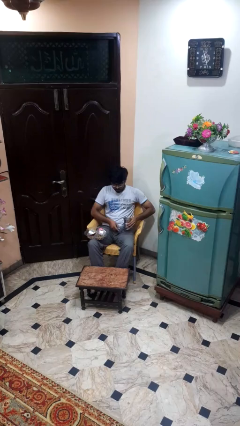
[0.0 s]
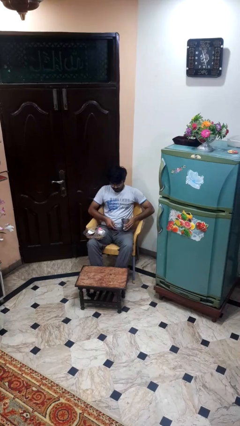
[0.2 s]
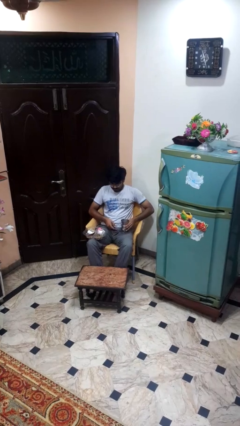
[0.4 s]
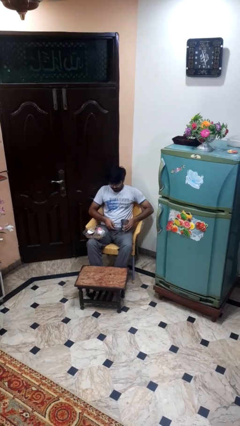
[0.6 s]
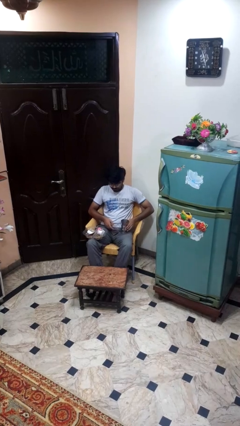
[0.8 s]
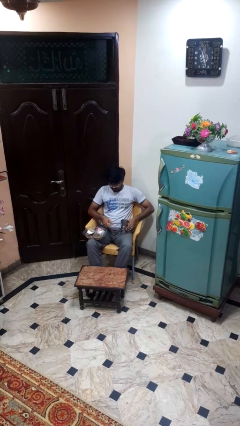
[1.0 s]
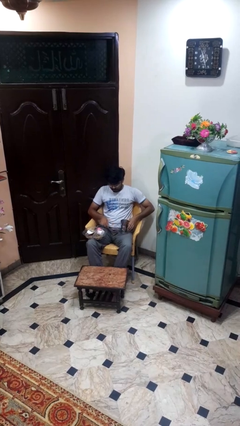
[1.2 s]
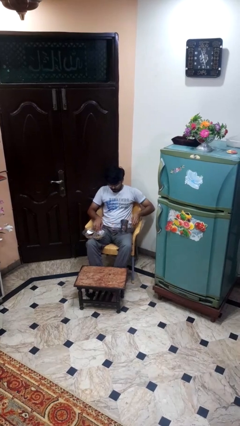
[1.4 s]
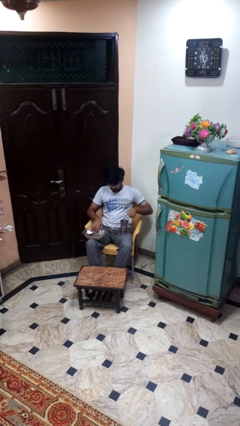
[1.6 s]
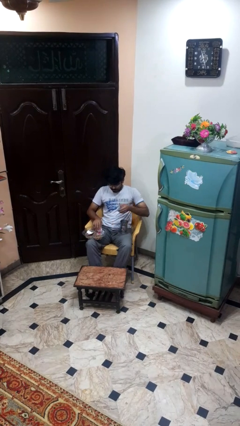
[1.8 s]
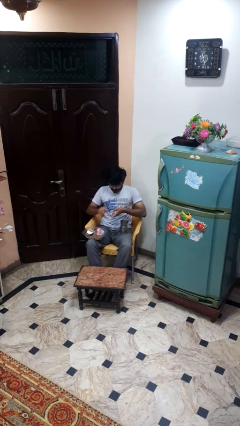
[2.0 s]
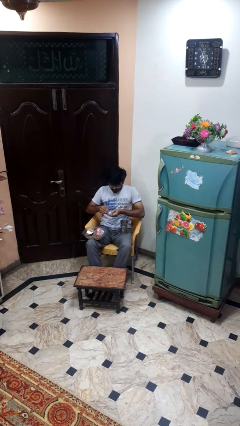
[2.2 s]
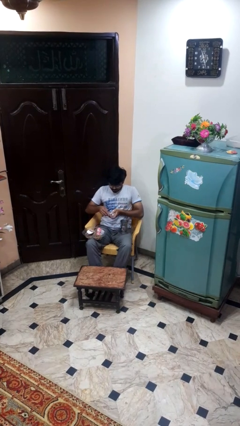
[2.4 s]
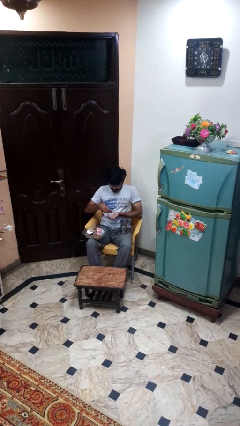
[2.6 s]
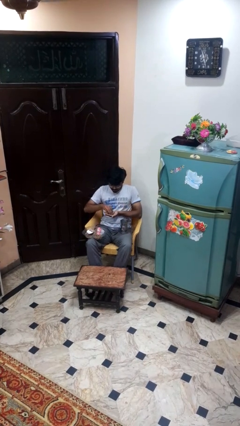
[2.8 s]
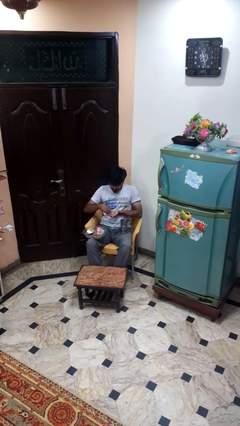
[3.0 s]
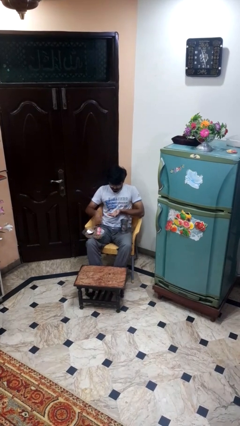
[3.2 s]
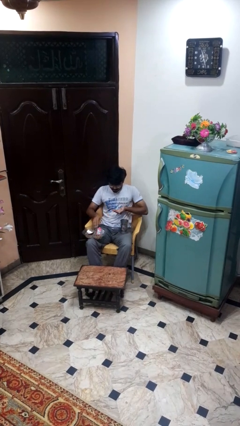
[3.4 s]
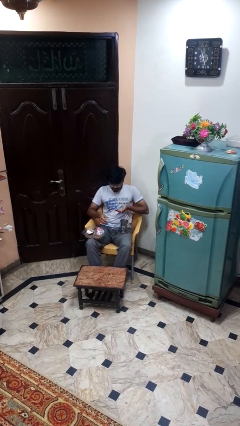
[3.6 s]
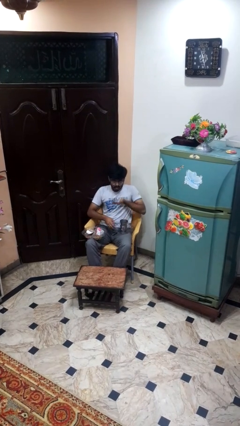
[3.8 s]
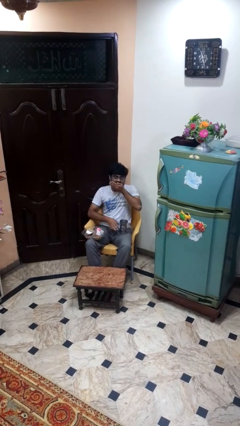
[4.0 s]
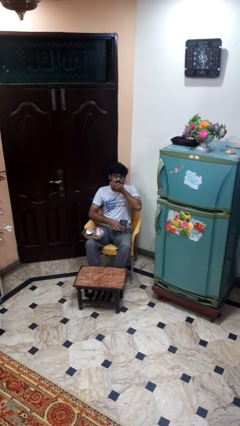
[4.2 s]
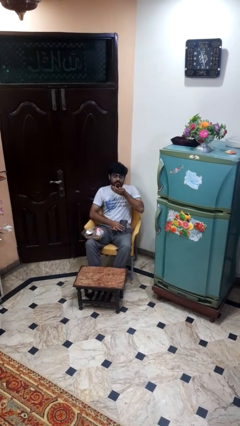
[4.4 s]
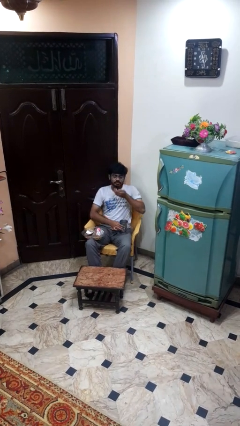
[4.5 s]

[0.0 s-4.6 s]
person takes medicine pills

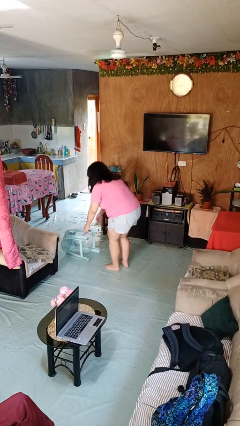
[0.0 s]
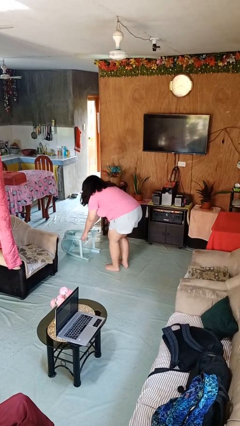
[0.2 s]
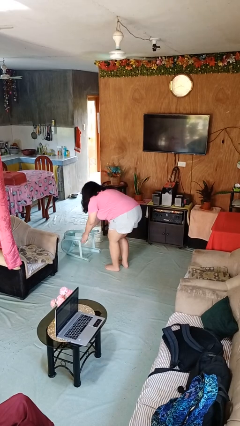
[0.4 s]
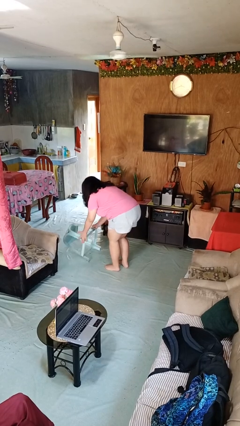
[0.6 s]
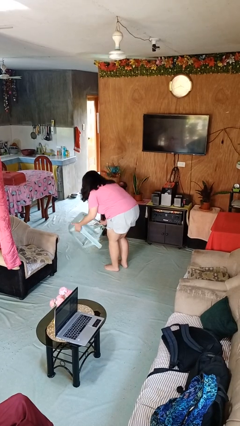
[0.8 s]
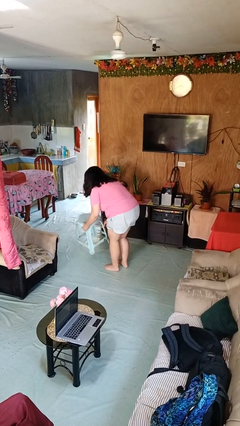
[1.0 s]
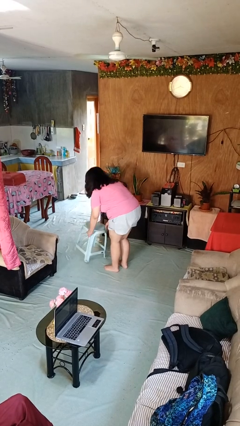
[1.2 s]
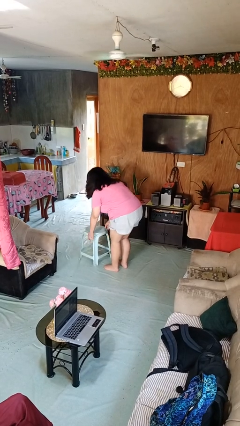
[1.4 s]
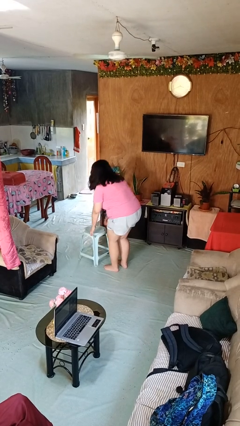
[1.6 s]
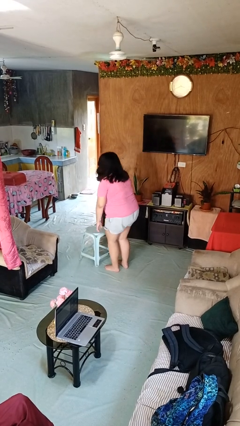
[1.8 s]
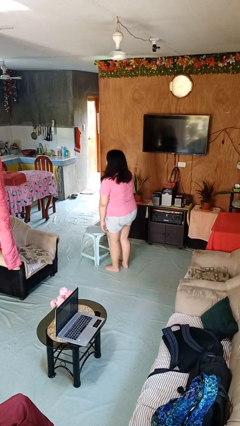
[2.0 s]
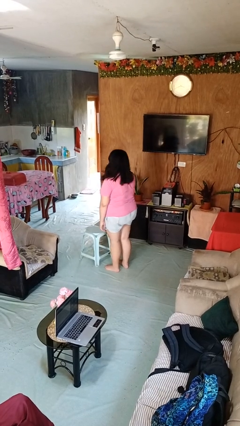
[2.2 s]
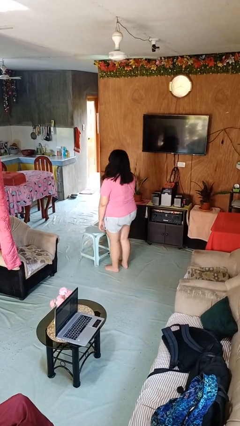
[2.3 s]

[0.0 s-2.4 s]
person sets upright furniture

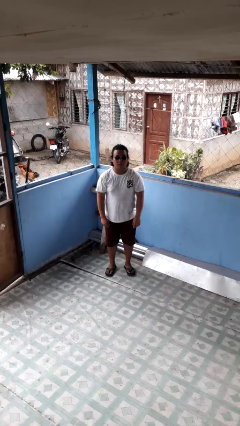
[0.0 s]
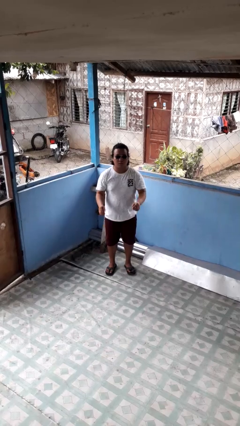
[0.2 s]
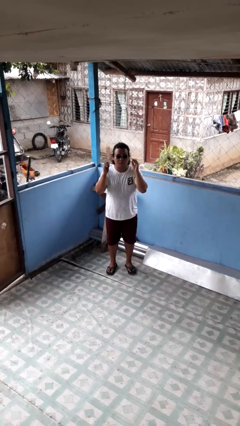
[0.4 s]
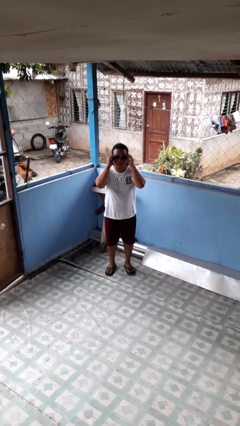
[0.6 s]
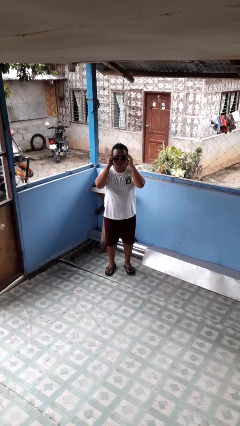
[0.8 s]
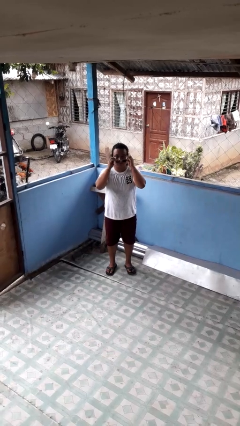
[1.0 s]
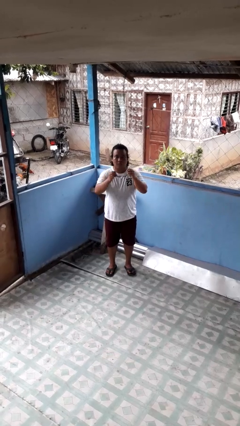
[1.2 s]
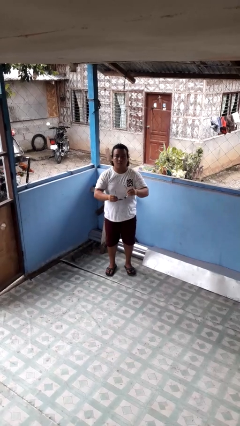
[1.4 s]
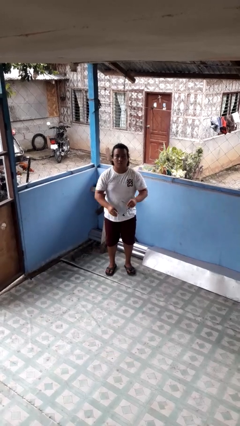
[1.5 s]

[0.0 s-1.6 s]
person takes off sunglasses

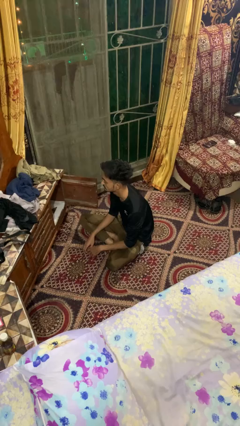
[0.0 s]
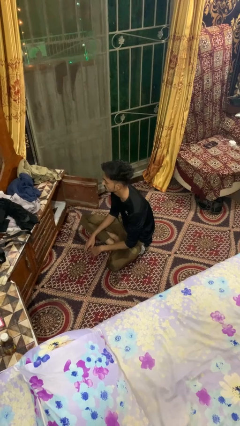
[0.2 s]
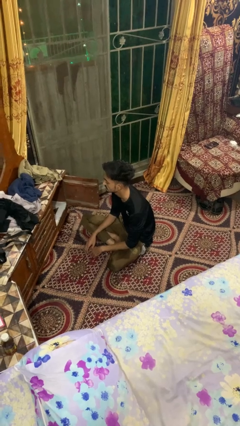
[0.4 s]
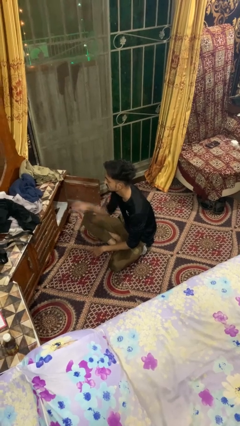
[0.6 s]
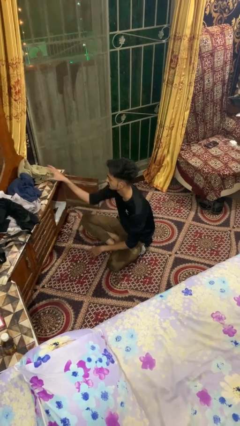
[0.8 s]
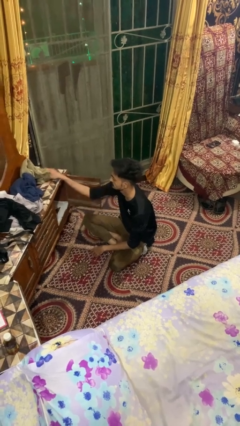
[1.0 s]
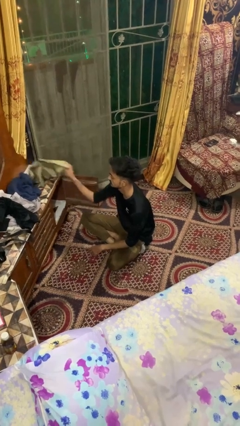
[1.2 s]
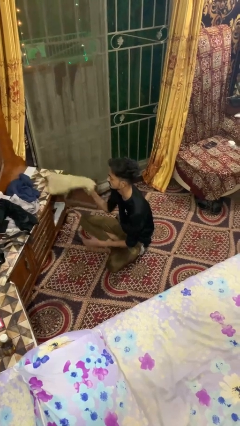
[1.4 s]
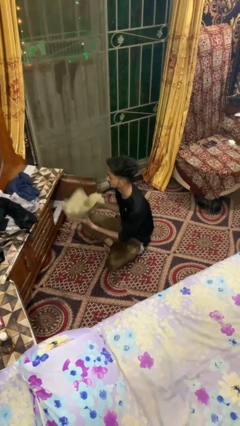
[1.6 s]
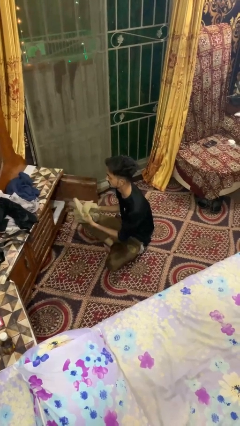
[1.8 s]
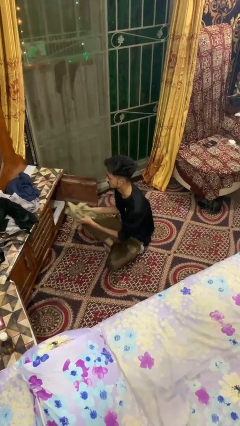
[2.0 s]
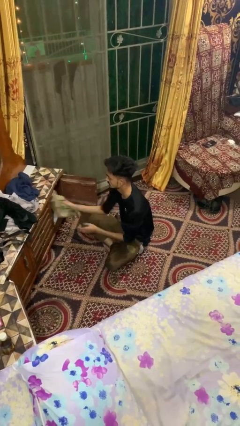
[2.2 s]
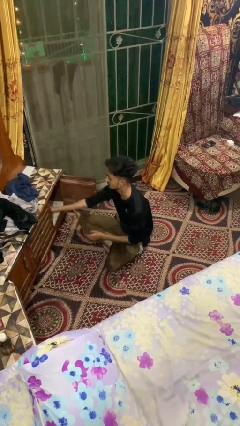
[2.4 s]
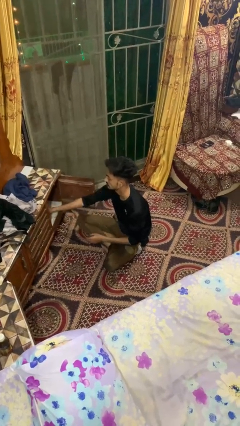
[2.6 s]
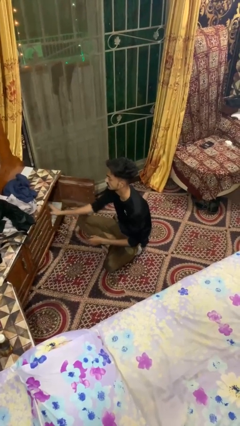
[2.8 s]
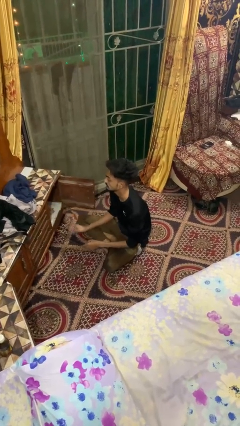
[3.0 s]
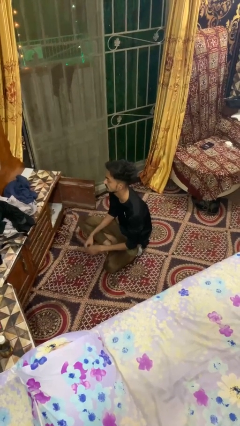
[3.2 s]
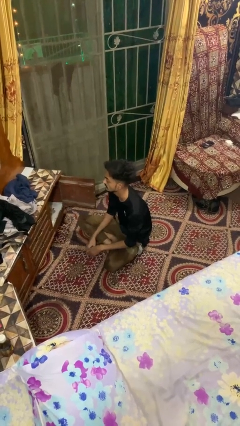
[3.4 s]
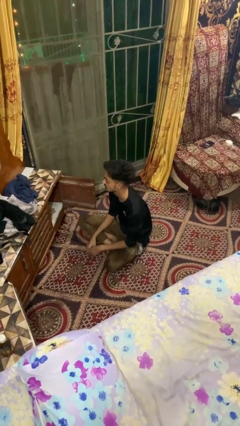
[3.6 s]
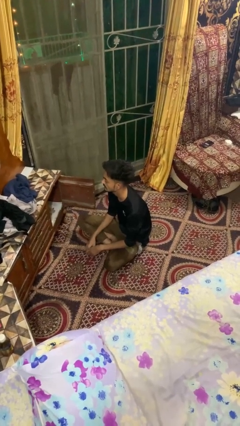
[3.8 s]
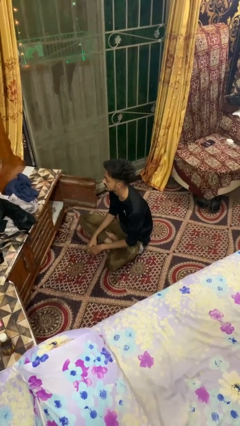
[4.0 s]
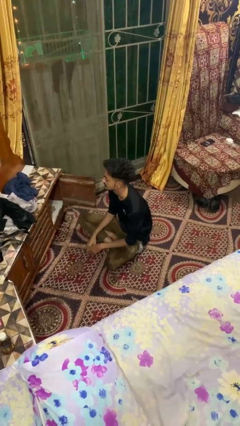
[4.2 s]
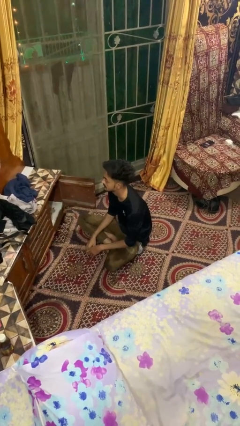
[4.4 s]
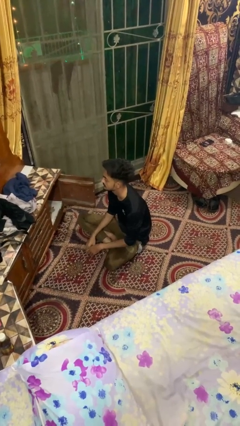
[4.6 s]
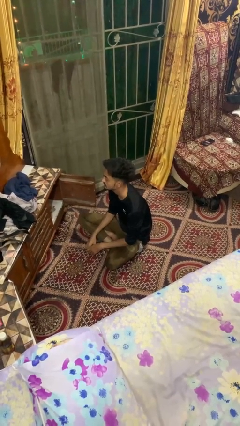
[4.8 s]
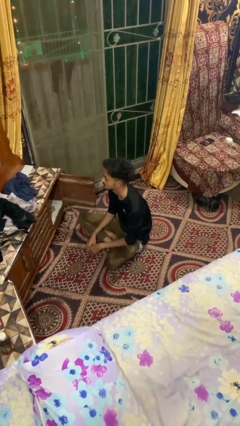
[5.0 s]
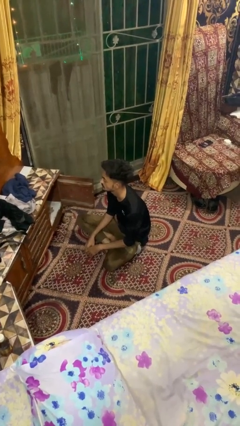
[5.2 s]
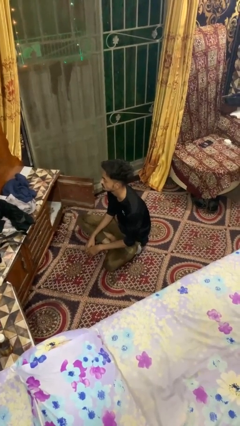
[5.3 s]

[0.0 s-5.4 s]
person puts clothes into dresser

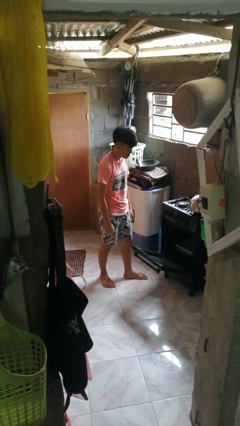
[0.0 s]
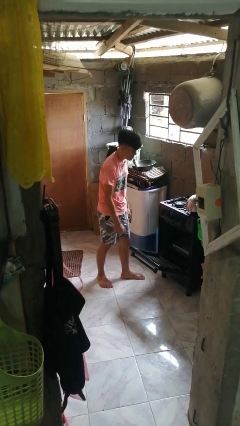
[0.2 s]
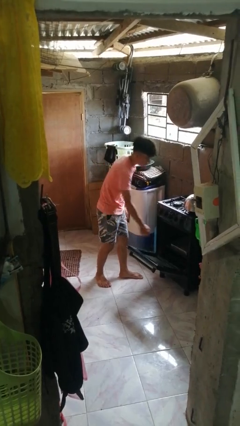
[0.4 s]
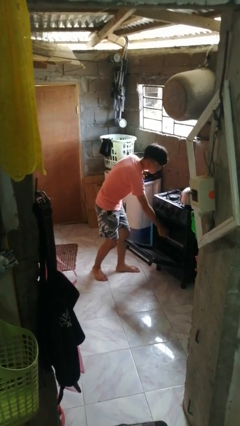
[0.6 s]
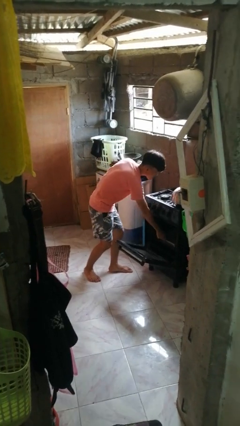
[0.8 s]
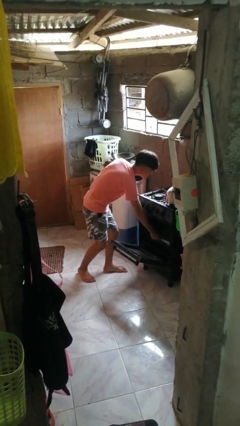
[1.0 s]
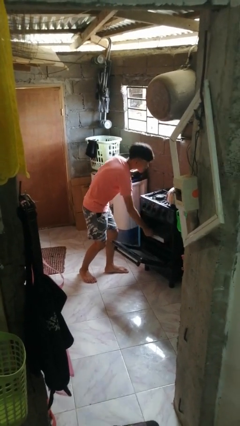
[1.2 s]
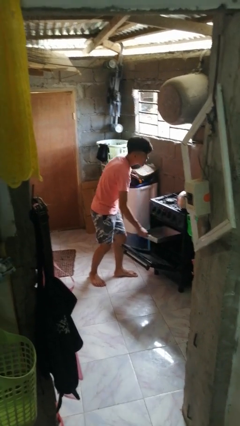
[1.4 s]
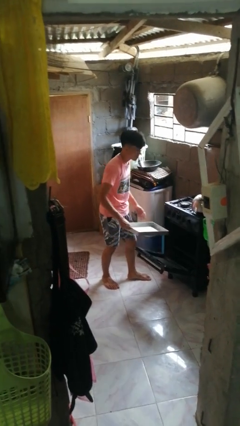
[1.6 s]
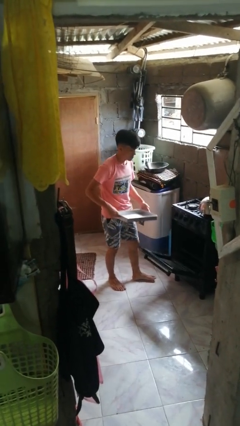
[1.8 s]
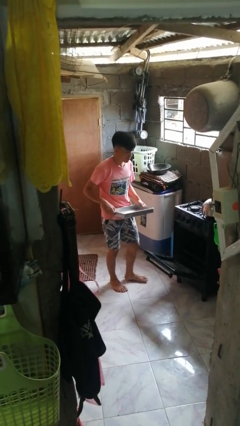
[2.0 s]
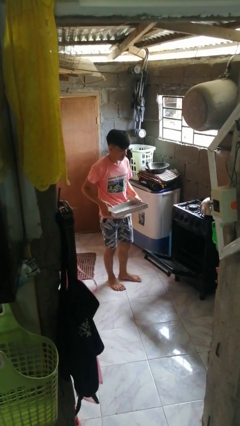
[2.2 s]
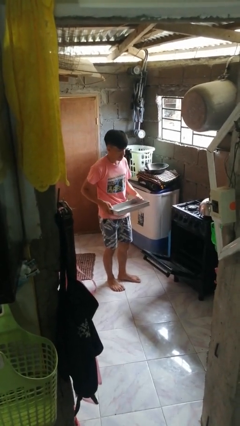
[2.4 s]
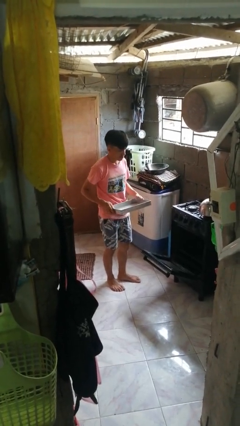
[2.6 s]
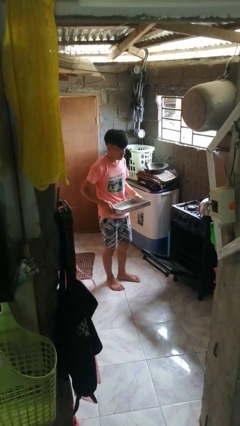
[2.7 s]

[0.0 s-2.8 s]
person takes object from oven

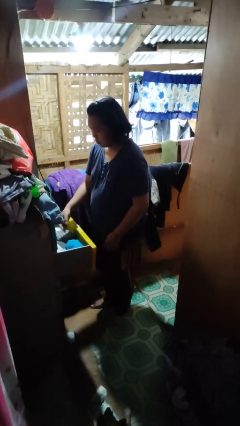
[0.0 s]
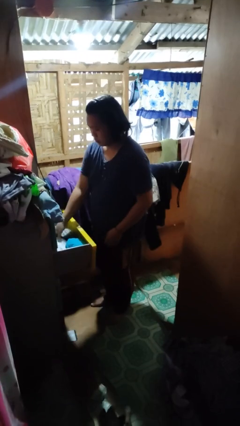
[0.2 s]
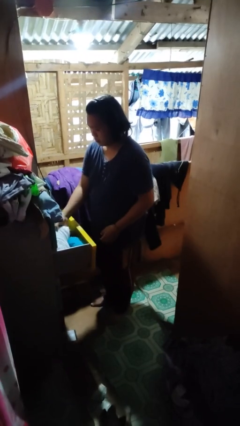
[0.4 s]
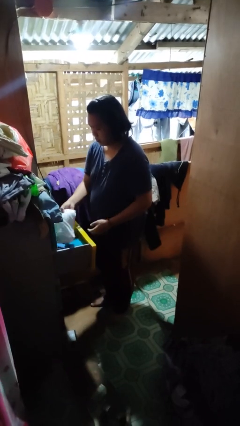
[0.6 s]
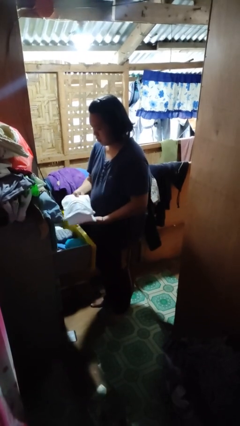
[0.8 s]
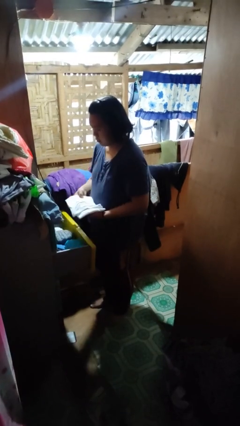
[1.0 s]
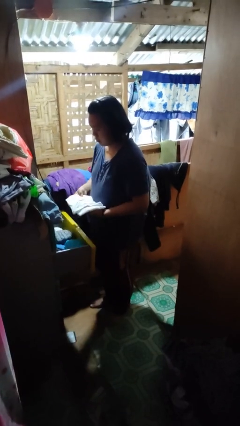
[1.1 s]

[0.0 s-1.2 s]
person takes clothes from dresser
